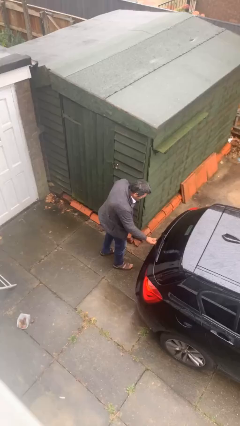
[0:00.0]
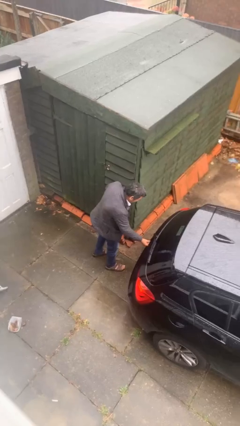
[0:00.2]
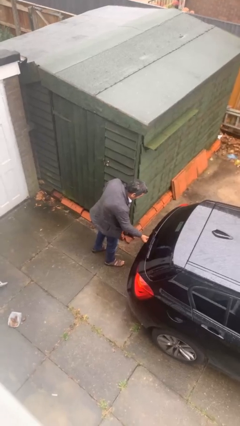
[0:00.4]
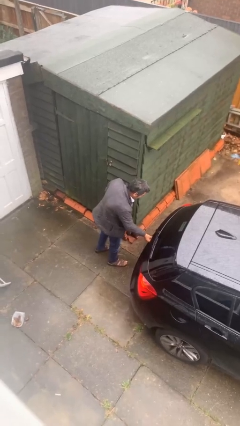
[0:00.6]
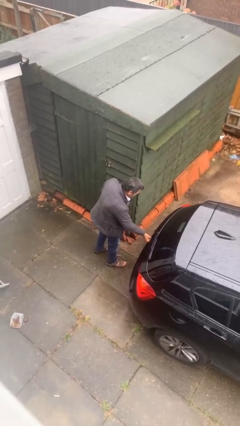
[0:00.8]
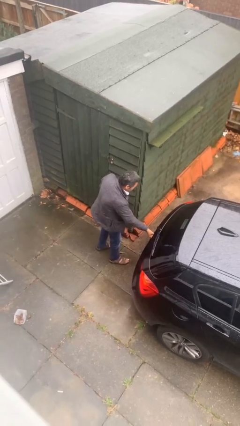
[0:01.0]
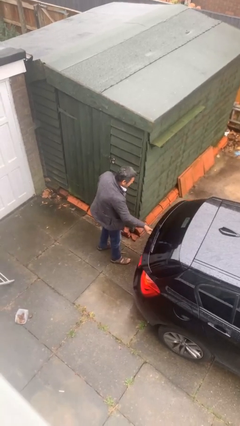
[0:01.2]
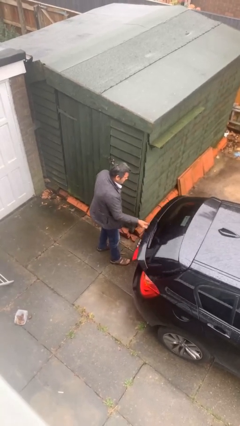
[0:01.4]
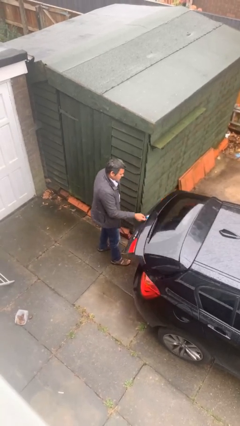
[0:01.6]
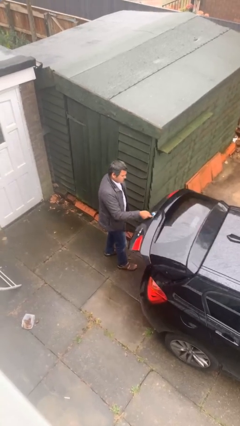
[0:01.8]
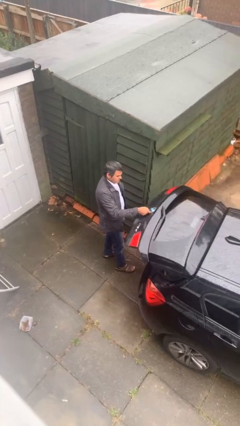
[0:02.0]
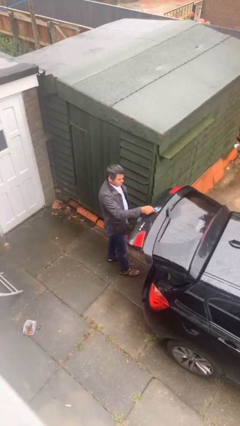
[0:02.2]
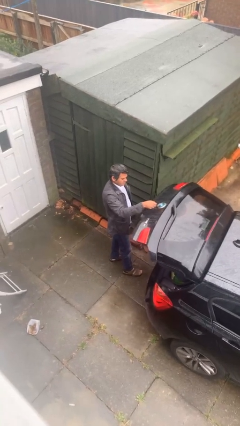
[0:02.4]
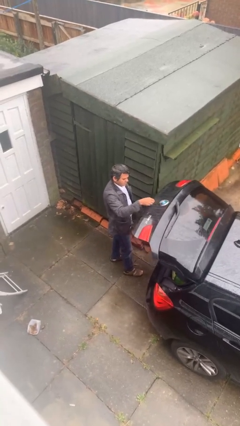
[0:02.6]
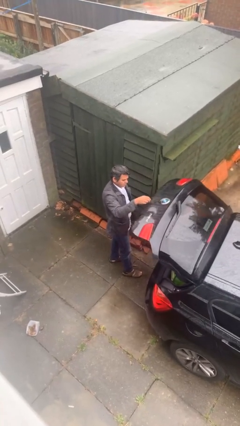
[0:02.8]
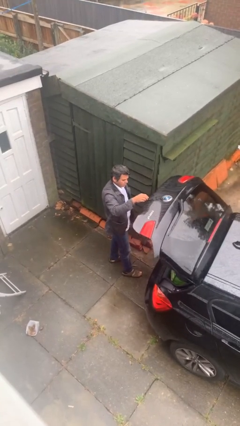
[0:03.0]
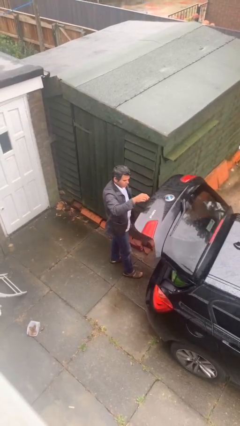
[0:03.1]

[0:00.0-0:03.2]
person opens car trunk

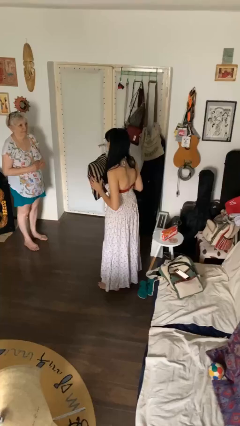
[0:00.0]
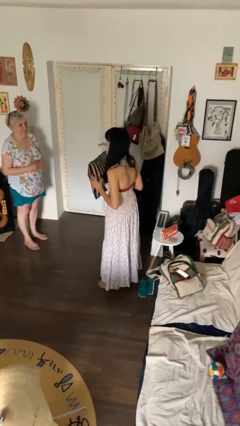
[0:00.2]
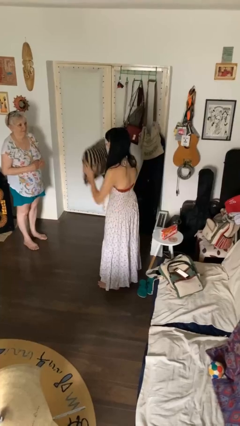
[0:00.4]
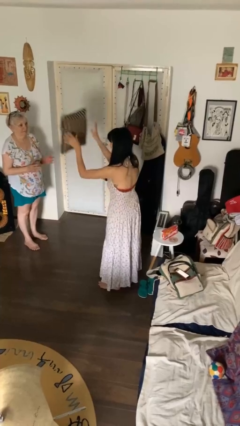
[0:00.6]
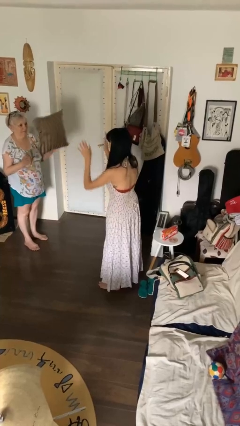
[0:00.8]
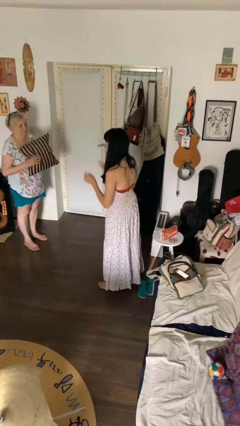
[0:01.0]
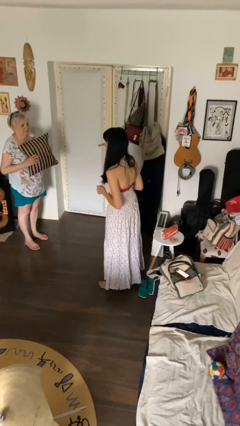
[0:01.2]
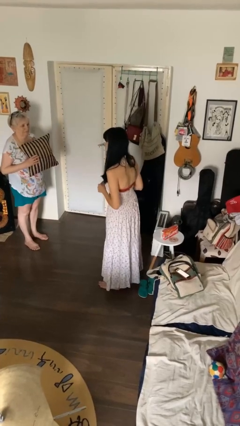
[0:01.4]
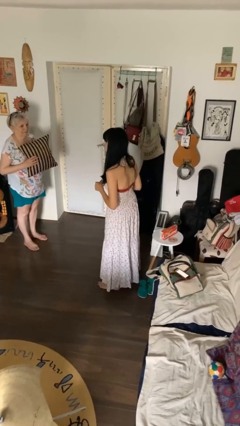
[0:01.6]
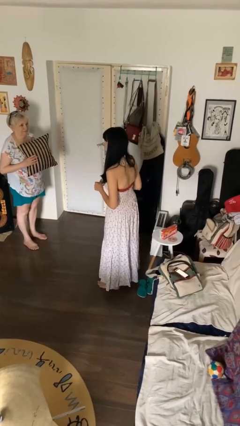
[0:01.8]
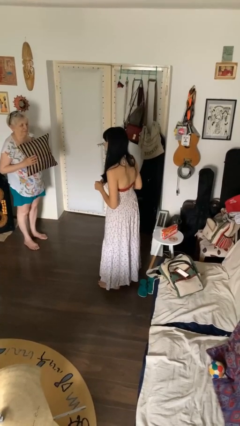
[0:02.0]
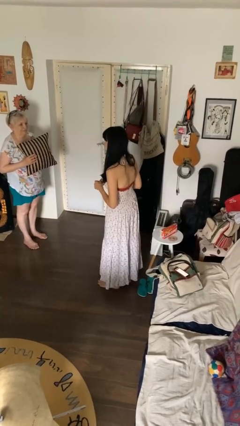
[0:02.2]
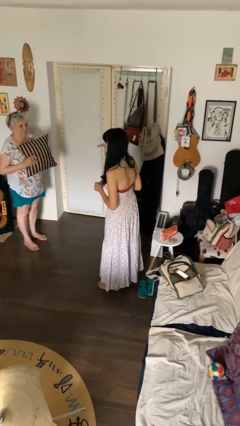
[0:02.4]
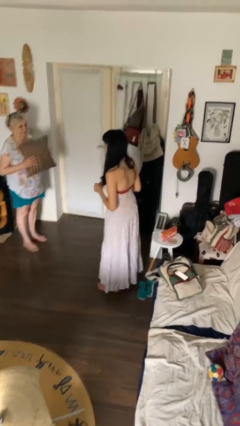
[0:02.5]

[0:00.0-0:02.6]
person throws object to person

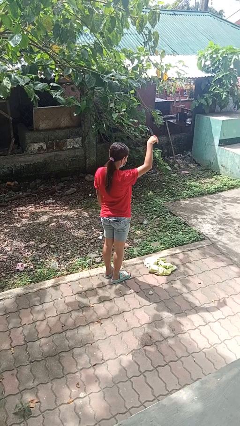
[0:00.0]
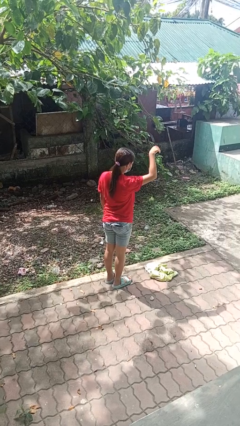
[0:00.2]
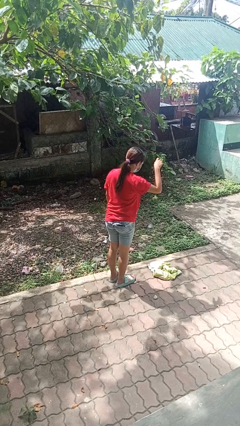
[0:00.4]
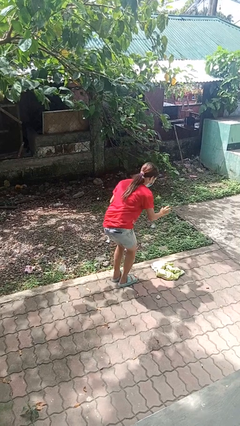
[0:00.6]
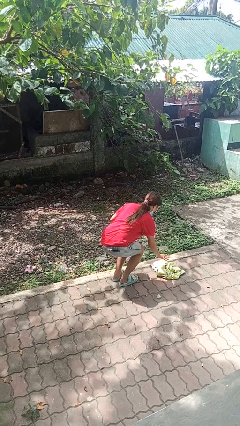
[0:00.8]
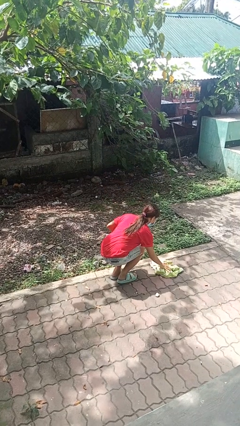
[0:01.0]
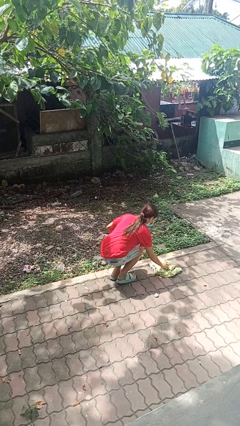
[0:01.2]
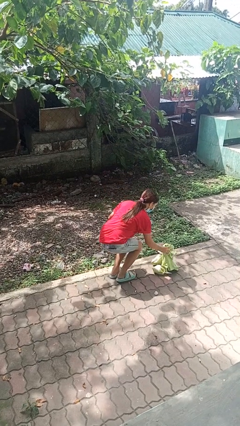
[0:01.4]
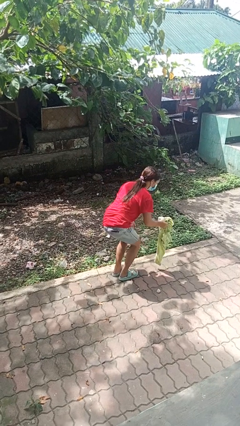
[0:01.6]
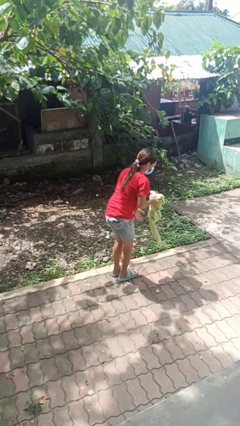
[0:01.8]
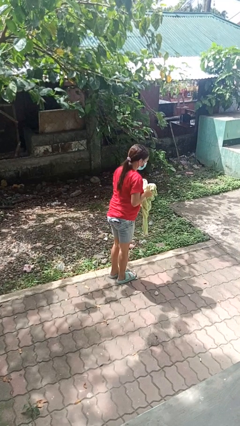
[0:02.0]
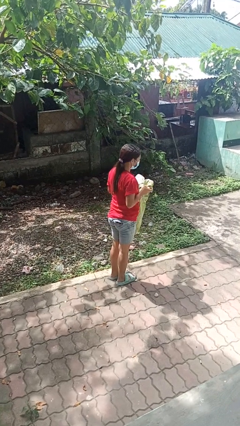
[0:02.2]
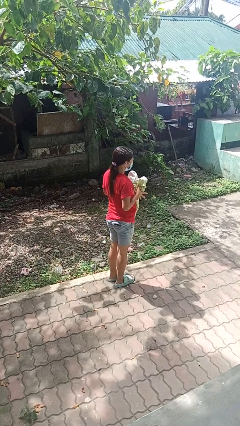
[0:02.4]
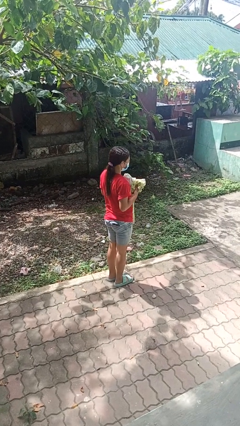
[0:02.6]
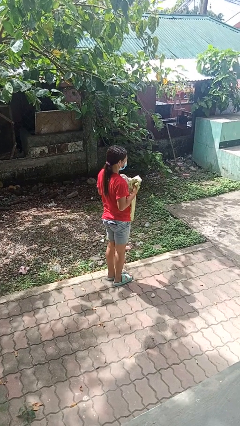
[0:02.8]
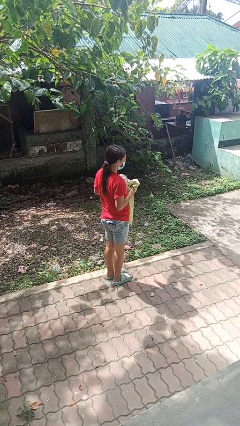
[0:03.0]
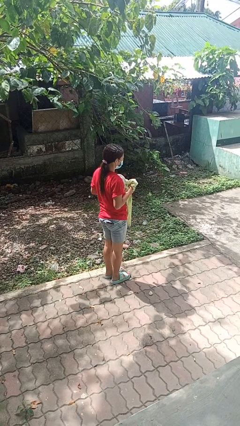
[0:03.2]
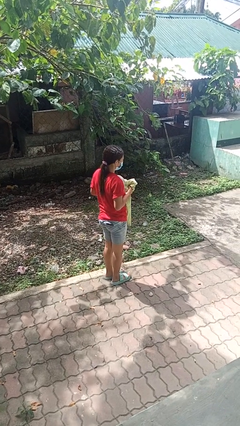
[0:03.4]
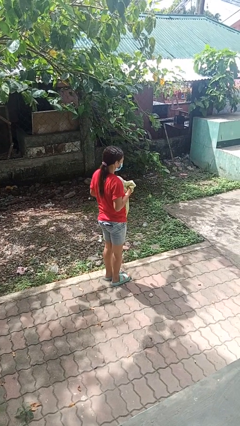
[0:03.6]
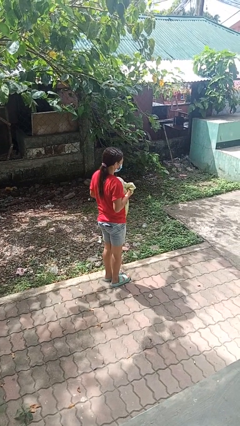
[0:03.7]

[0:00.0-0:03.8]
person picks up object from floor

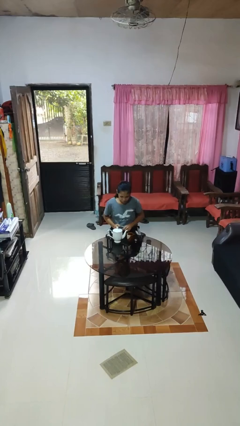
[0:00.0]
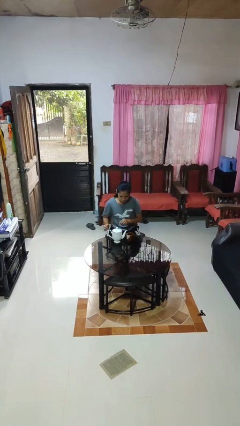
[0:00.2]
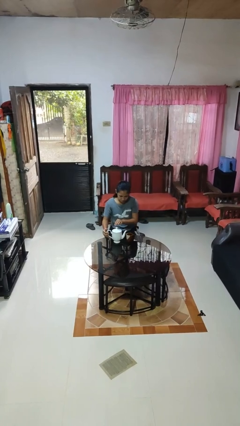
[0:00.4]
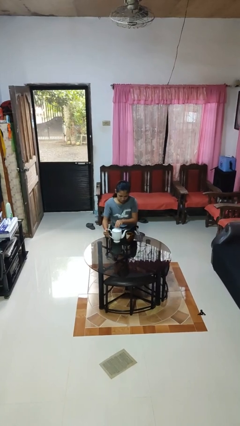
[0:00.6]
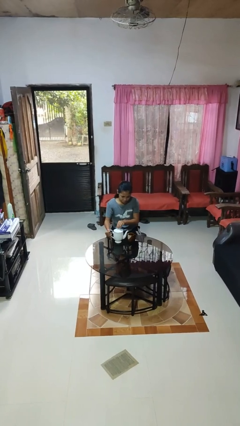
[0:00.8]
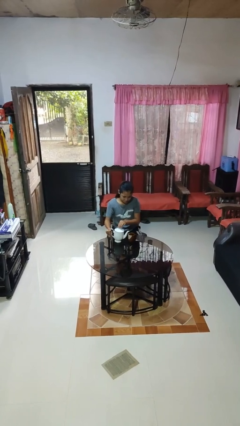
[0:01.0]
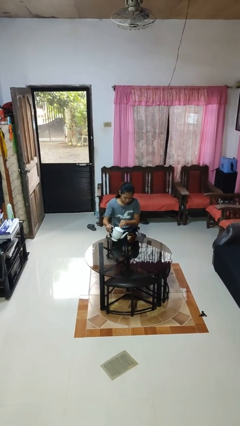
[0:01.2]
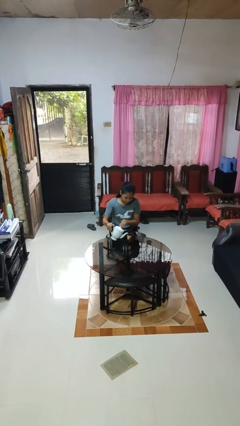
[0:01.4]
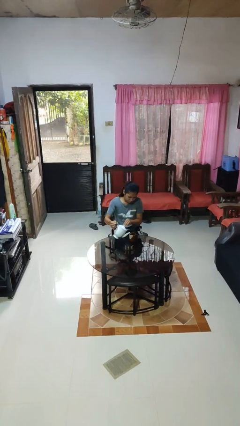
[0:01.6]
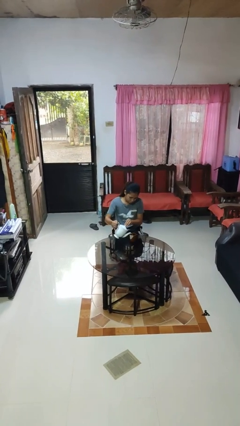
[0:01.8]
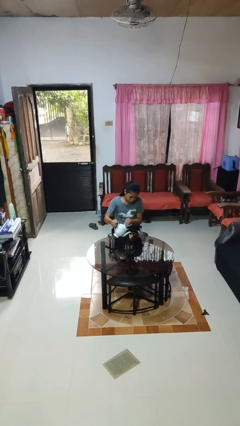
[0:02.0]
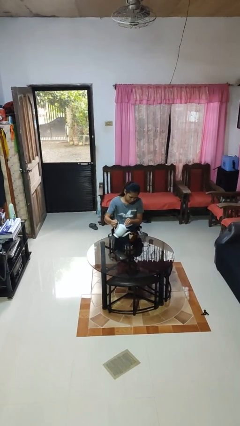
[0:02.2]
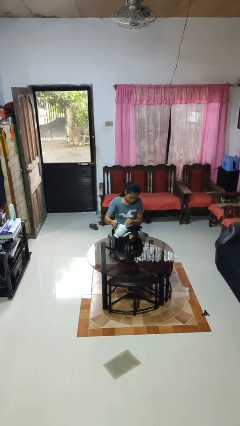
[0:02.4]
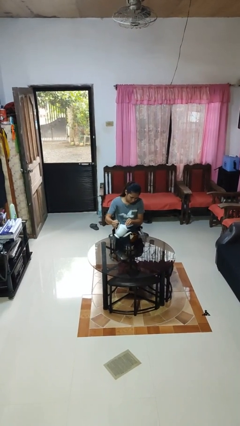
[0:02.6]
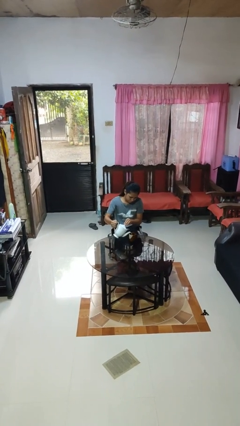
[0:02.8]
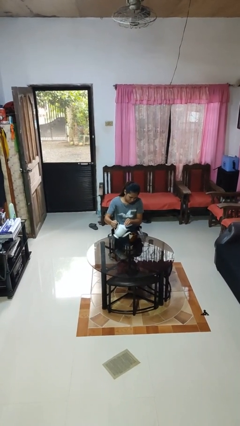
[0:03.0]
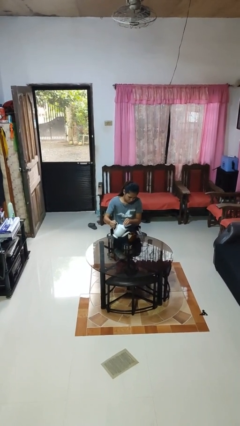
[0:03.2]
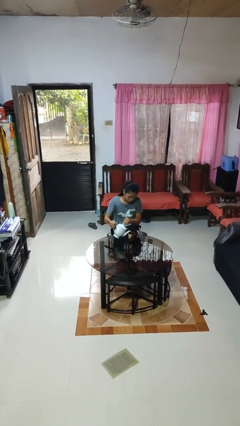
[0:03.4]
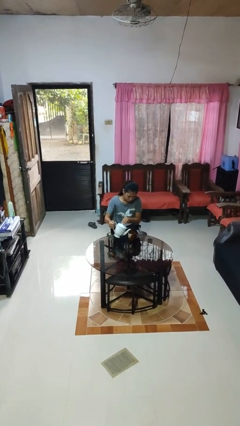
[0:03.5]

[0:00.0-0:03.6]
person pours coffee into mug

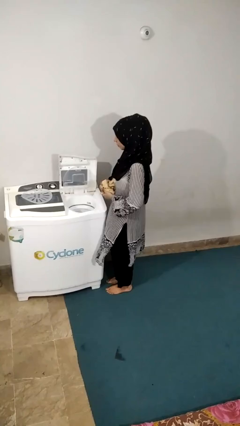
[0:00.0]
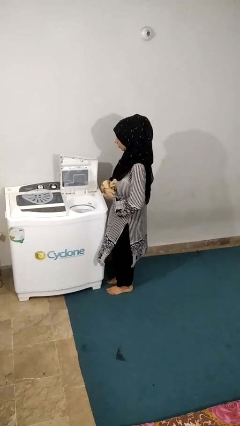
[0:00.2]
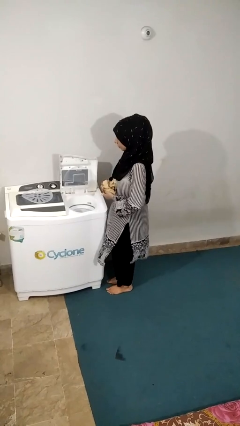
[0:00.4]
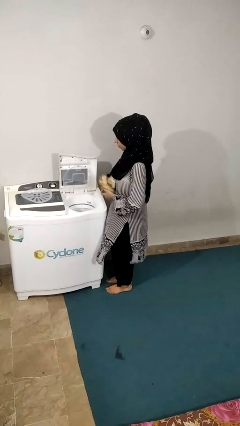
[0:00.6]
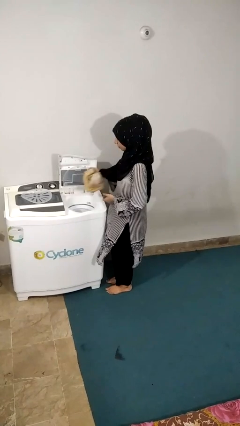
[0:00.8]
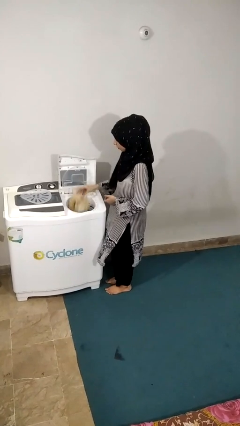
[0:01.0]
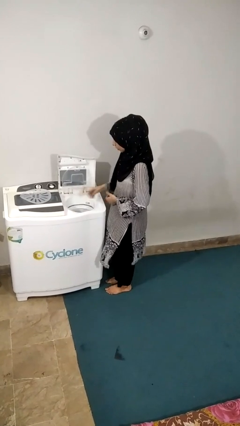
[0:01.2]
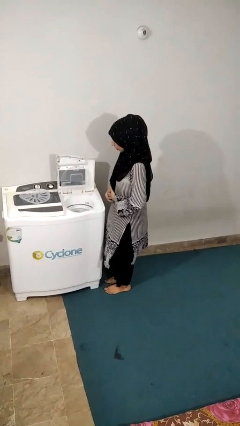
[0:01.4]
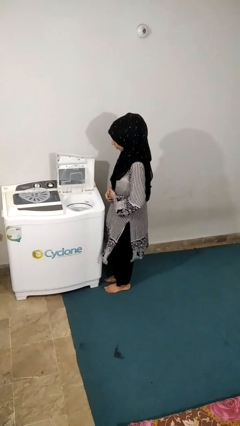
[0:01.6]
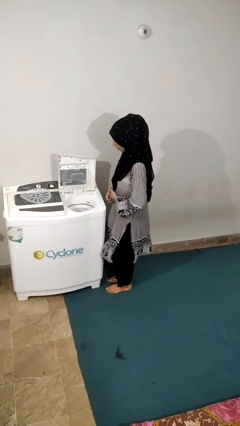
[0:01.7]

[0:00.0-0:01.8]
person loads dryer

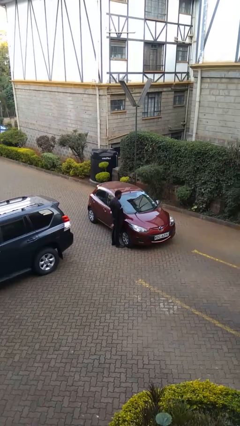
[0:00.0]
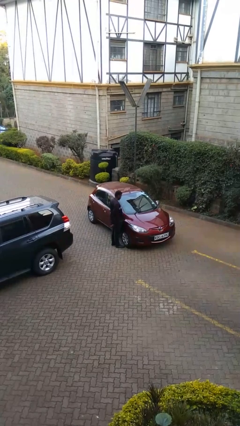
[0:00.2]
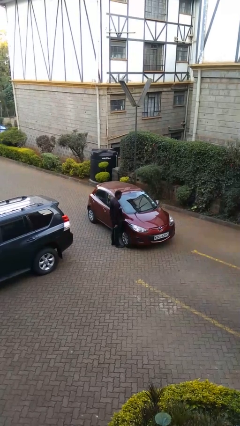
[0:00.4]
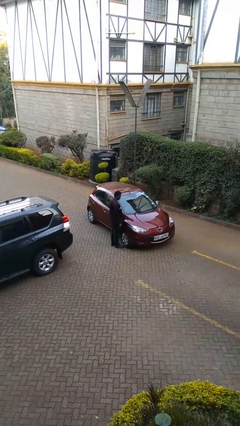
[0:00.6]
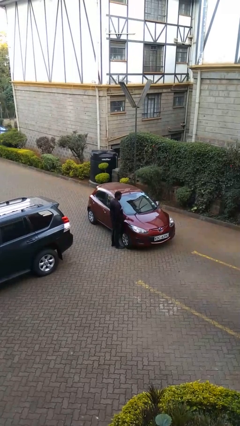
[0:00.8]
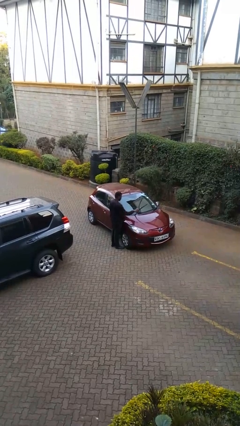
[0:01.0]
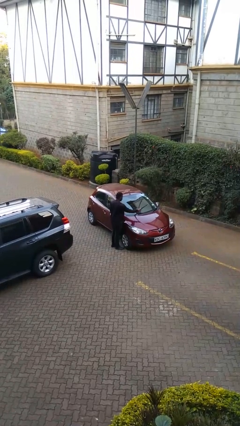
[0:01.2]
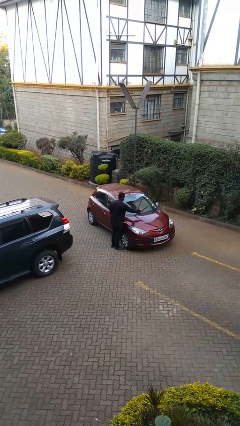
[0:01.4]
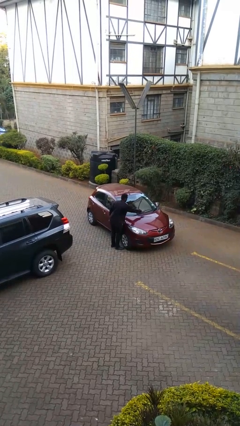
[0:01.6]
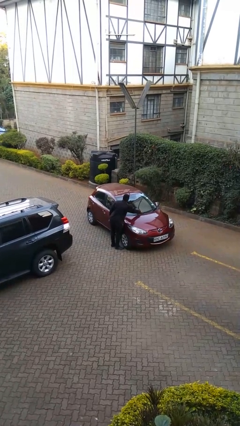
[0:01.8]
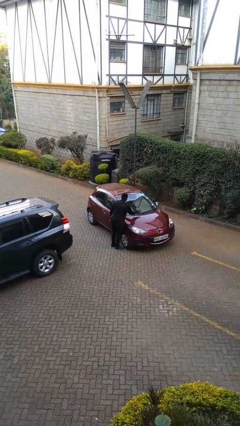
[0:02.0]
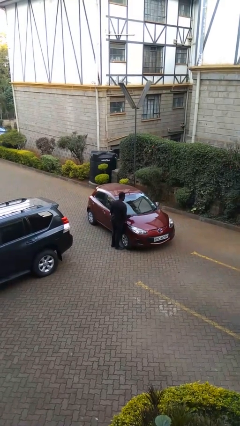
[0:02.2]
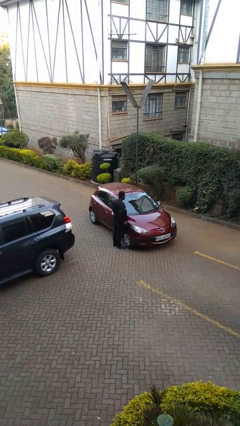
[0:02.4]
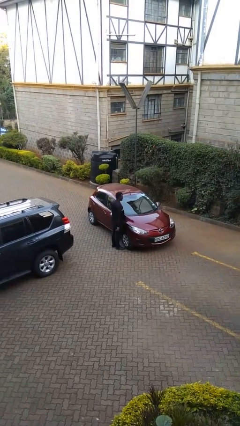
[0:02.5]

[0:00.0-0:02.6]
person flips down car wipers
